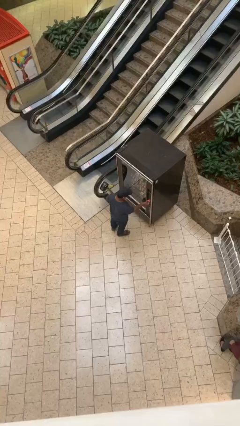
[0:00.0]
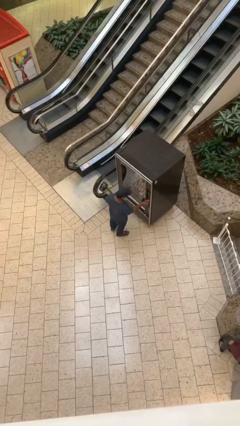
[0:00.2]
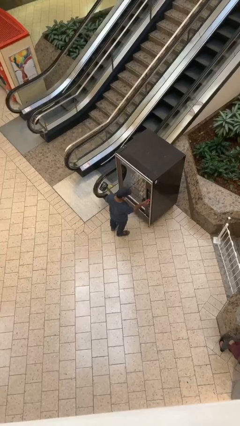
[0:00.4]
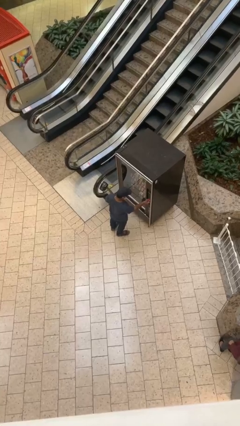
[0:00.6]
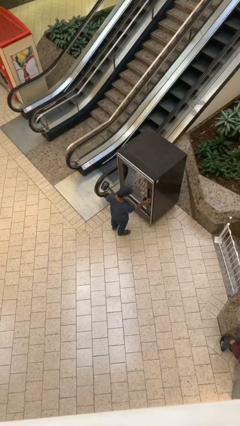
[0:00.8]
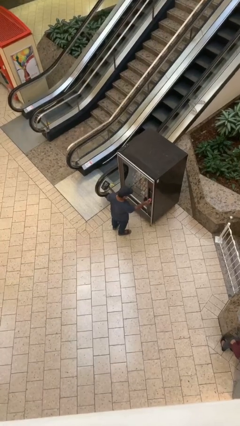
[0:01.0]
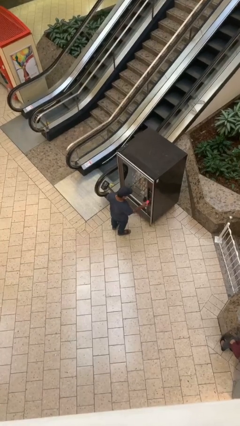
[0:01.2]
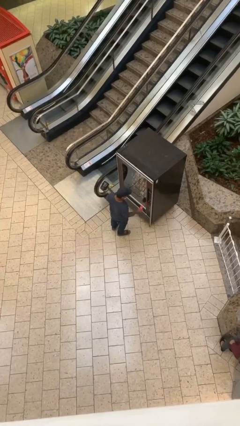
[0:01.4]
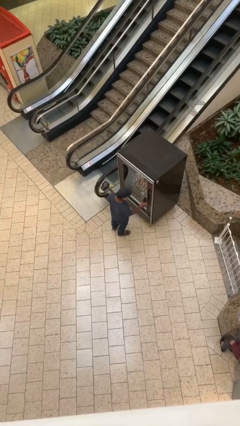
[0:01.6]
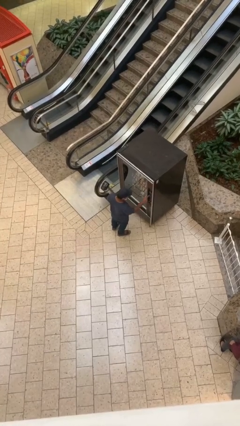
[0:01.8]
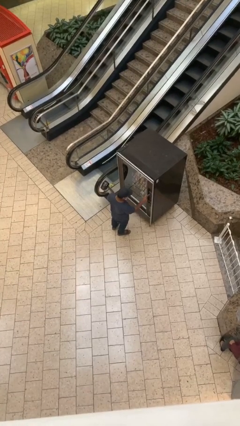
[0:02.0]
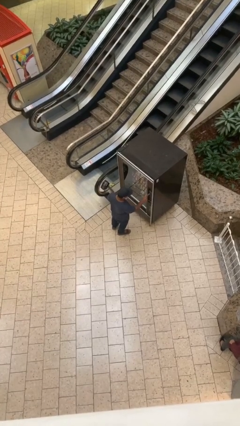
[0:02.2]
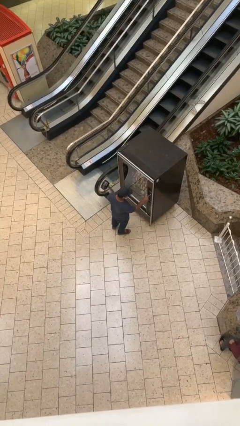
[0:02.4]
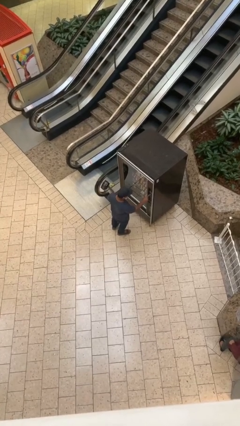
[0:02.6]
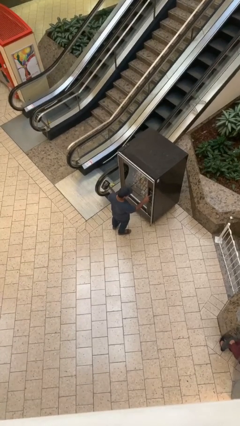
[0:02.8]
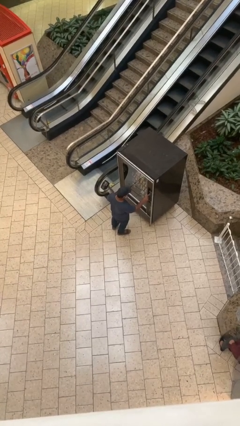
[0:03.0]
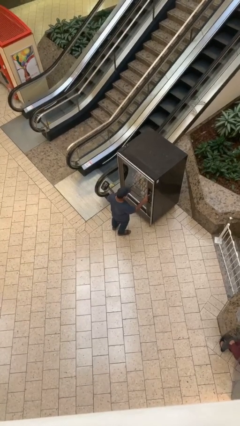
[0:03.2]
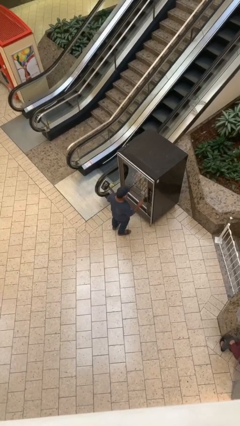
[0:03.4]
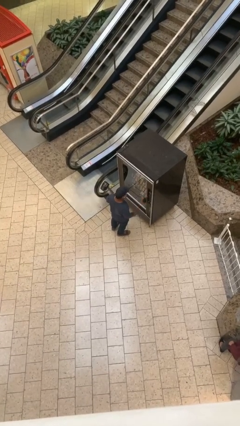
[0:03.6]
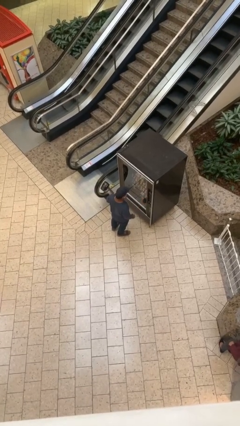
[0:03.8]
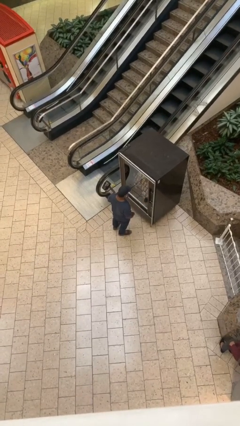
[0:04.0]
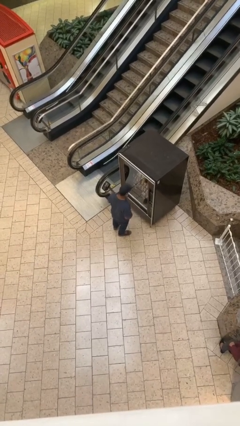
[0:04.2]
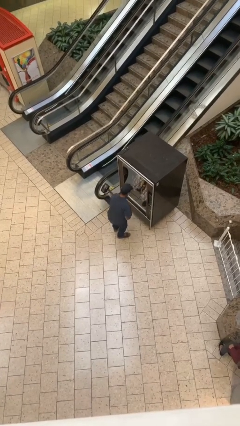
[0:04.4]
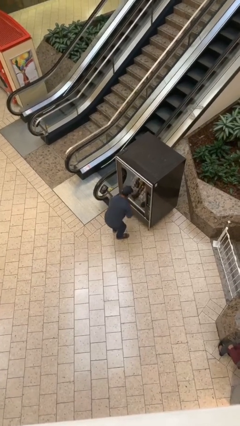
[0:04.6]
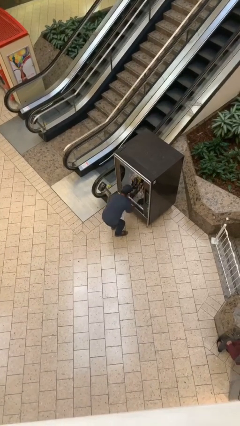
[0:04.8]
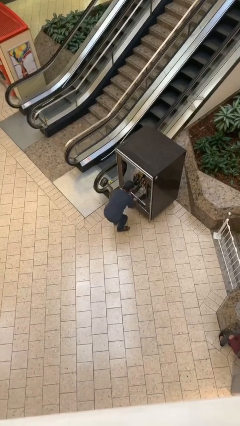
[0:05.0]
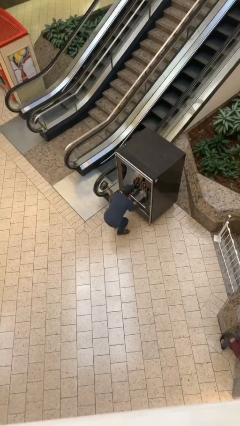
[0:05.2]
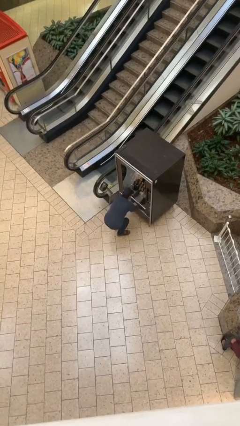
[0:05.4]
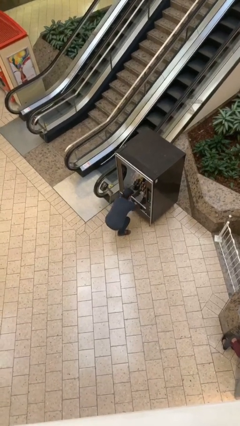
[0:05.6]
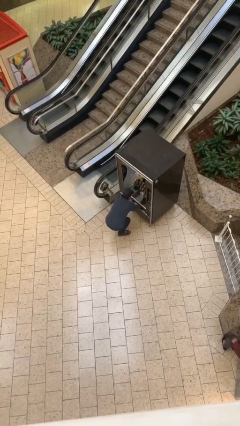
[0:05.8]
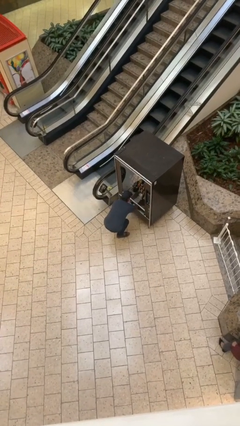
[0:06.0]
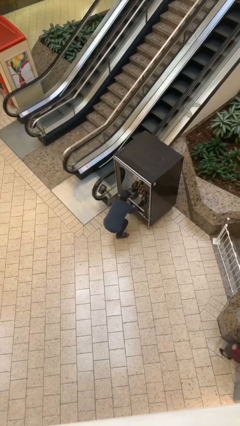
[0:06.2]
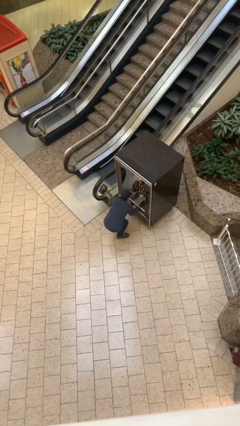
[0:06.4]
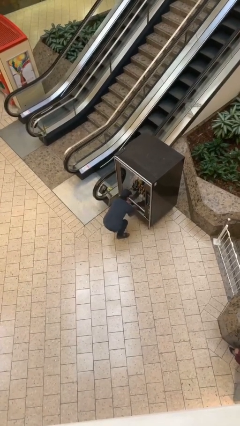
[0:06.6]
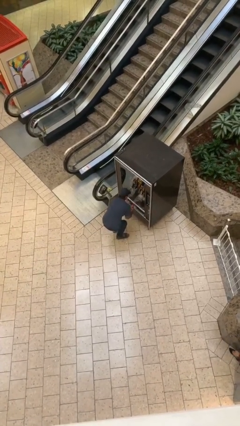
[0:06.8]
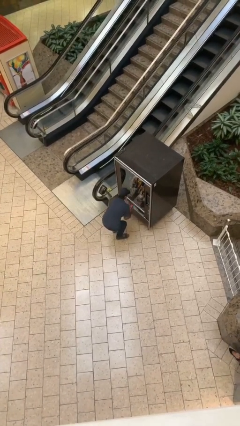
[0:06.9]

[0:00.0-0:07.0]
person purchases from machine

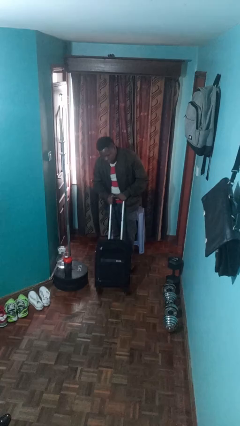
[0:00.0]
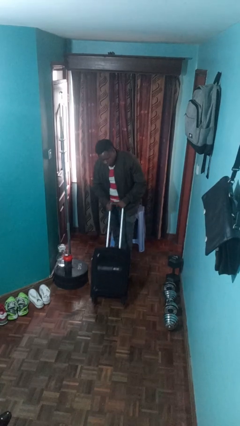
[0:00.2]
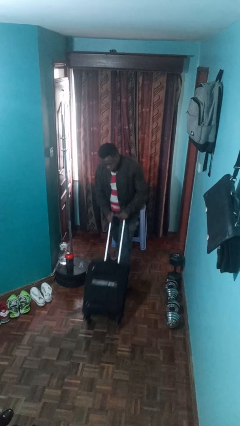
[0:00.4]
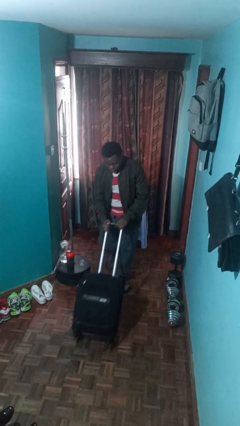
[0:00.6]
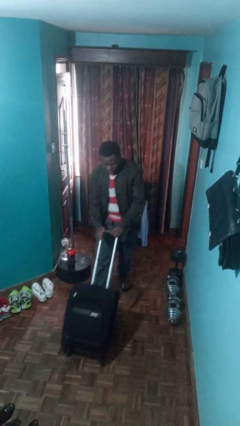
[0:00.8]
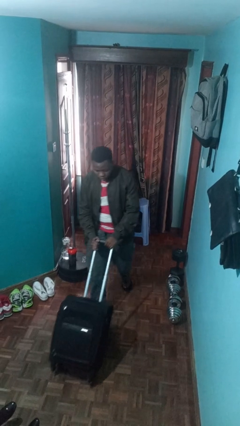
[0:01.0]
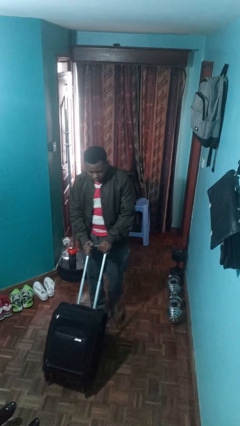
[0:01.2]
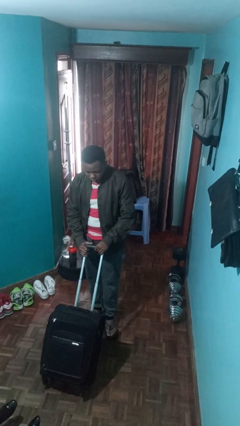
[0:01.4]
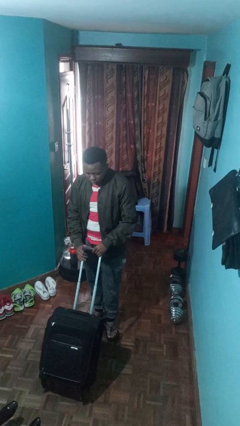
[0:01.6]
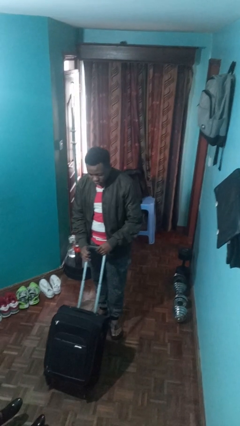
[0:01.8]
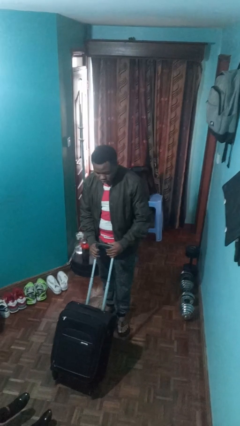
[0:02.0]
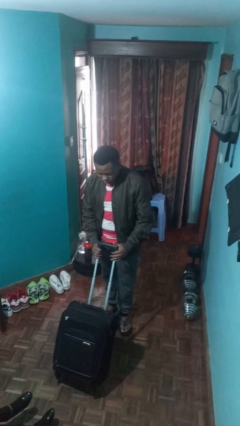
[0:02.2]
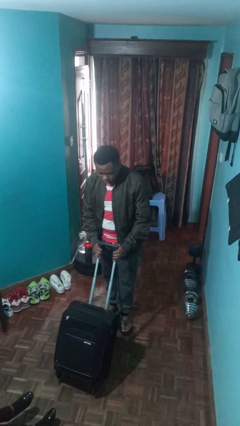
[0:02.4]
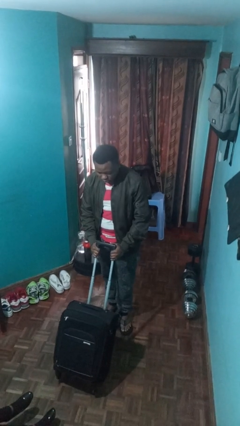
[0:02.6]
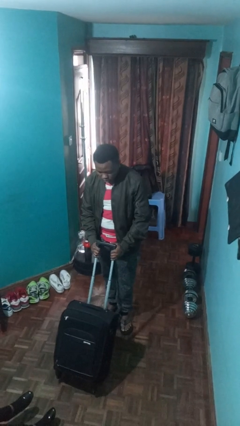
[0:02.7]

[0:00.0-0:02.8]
person pushes wheeled cart

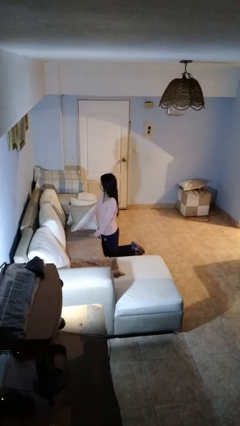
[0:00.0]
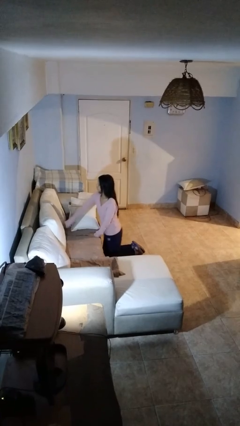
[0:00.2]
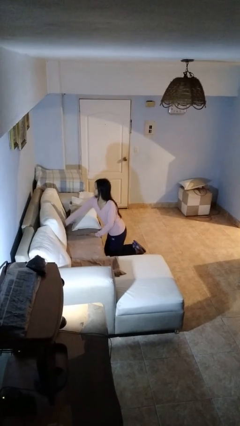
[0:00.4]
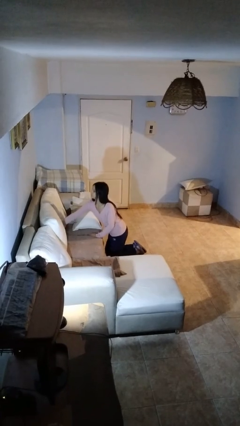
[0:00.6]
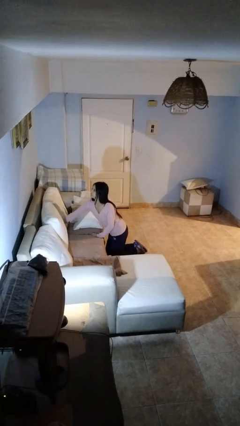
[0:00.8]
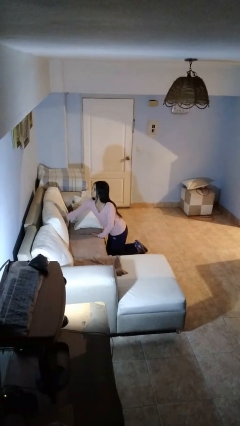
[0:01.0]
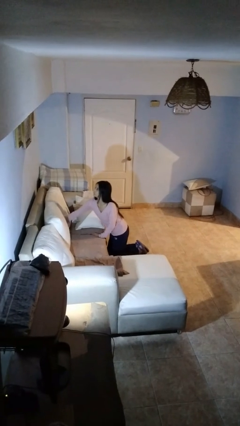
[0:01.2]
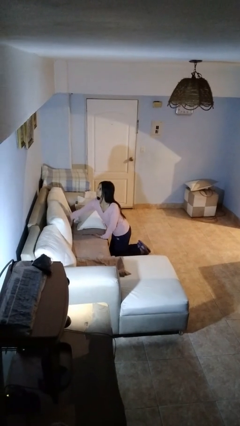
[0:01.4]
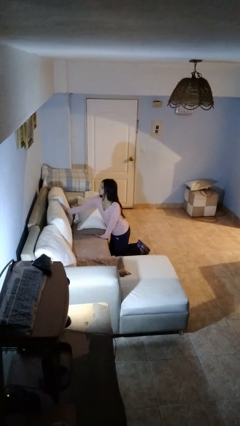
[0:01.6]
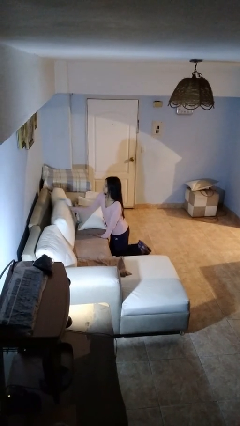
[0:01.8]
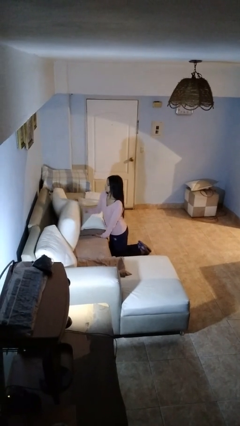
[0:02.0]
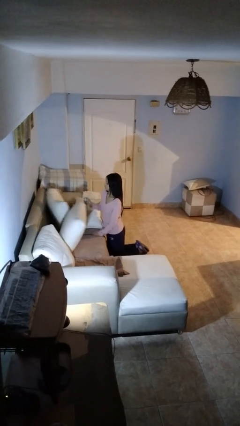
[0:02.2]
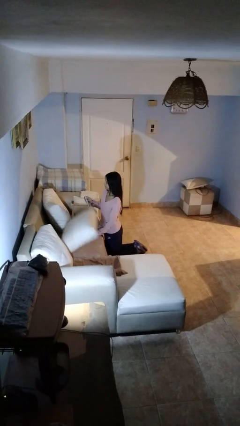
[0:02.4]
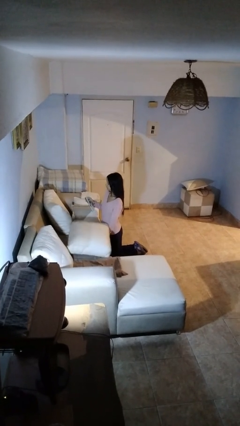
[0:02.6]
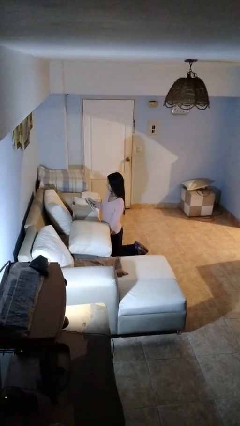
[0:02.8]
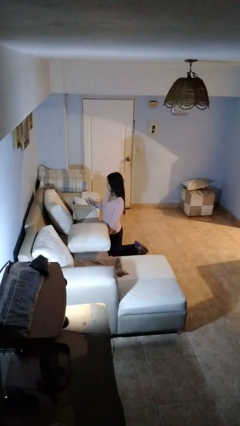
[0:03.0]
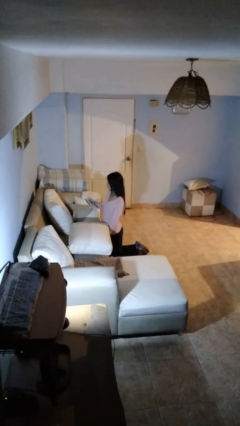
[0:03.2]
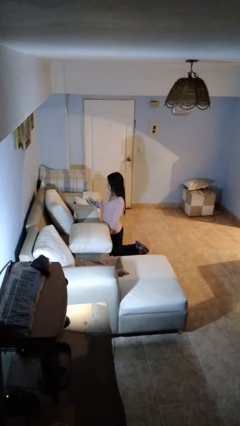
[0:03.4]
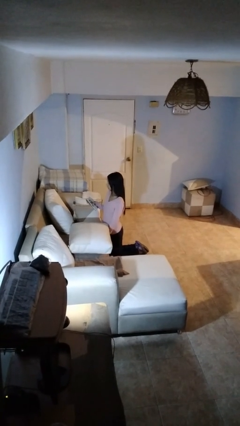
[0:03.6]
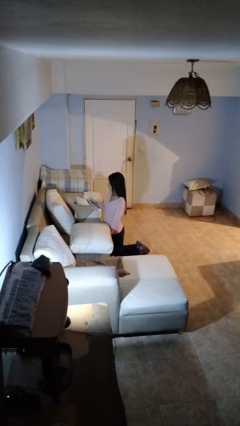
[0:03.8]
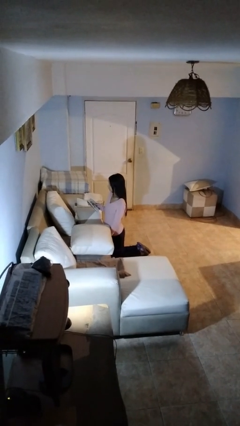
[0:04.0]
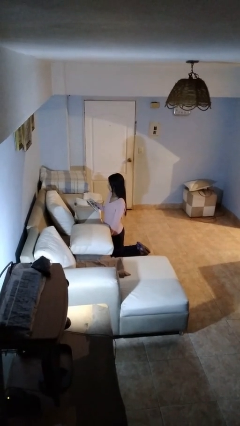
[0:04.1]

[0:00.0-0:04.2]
person searches in couch

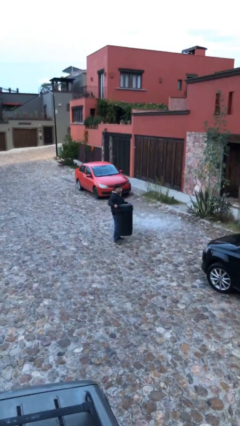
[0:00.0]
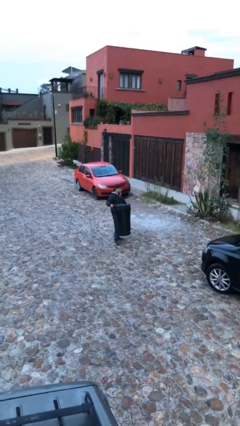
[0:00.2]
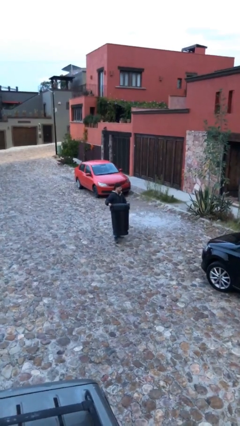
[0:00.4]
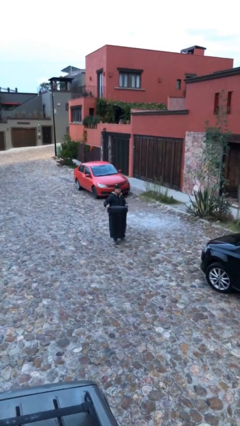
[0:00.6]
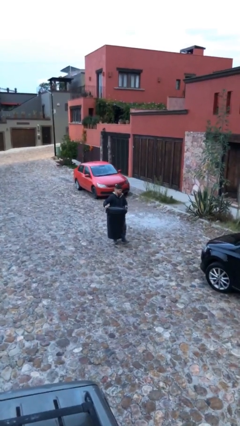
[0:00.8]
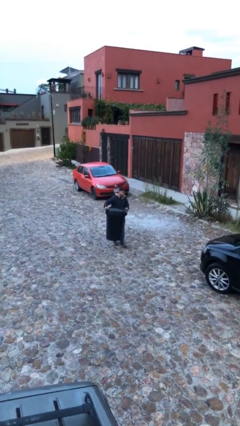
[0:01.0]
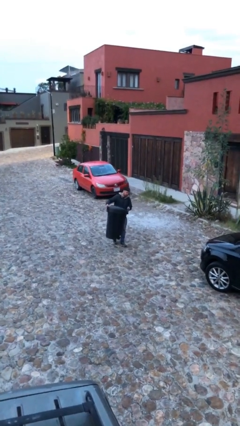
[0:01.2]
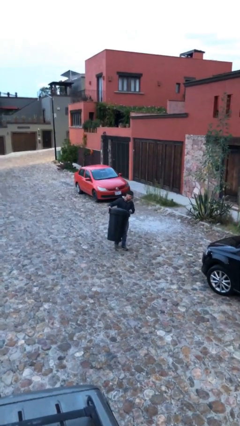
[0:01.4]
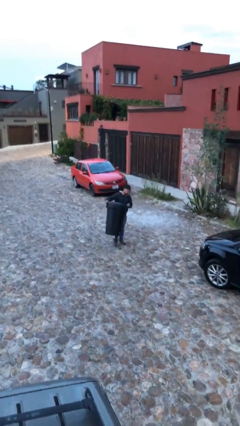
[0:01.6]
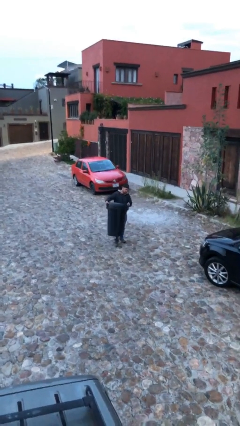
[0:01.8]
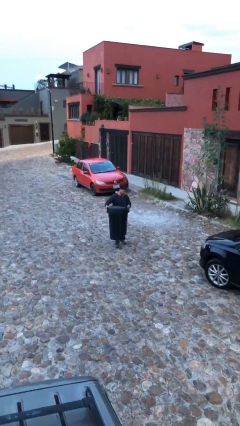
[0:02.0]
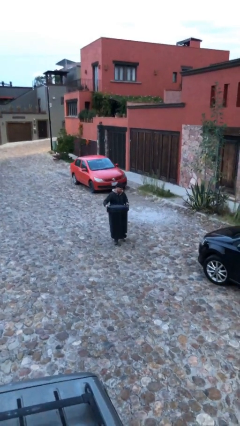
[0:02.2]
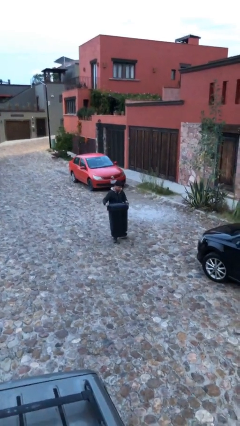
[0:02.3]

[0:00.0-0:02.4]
person carries heavy object

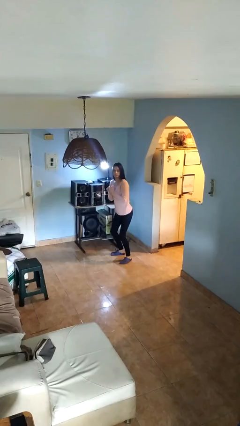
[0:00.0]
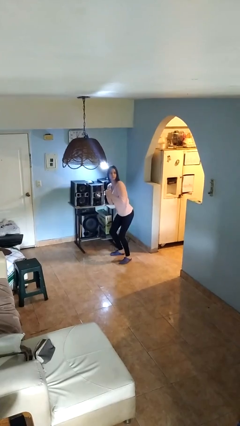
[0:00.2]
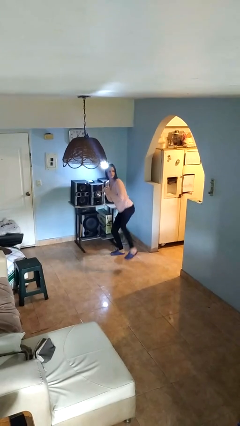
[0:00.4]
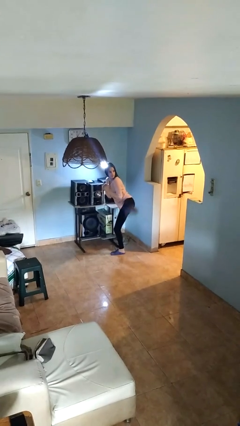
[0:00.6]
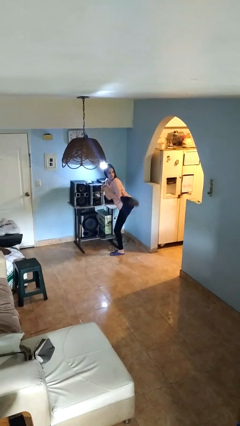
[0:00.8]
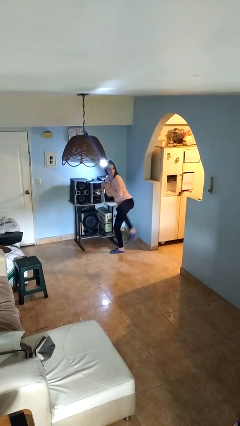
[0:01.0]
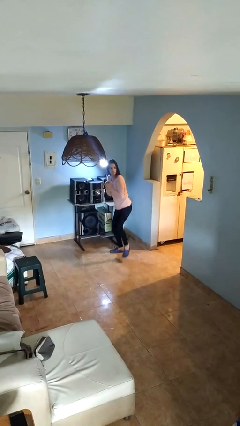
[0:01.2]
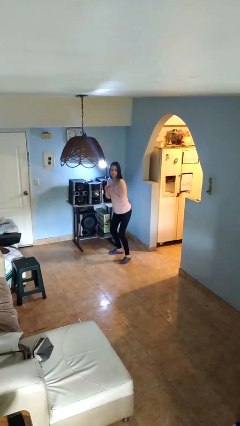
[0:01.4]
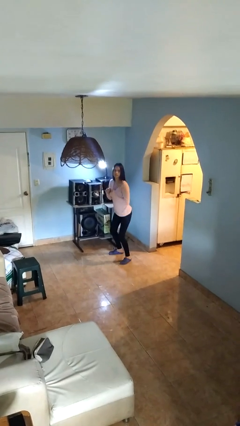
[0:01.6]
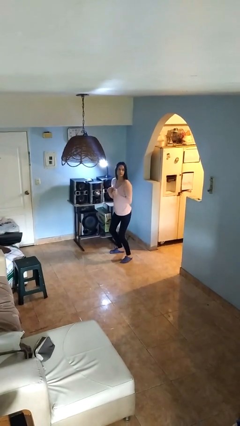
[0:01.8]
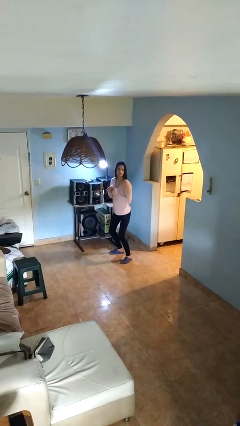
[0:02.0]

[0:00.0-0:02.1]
person karate kicks
